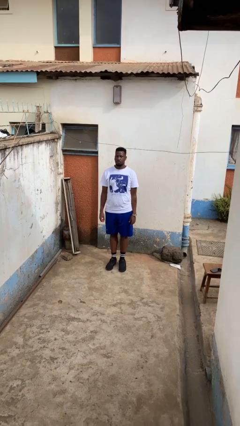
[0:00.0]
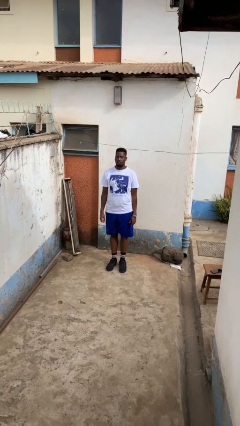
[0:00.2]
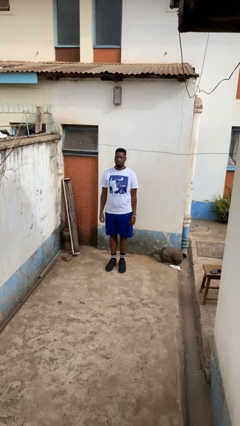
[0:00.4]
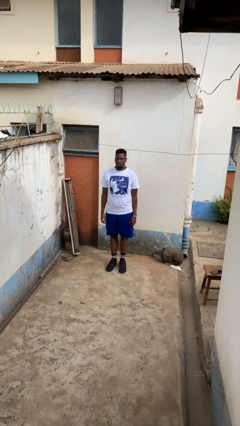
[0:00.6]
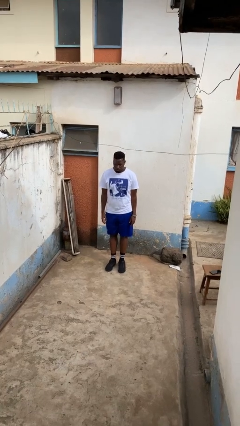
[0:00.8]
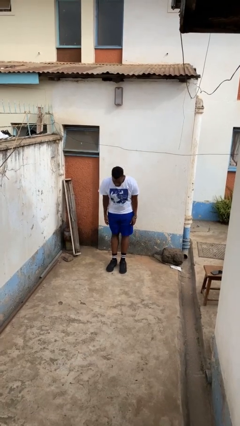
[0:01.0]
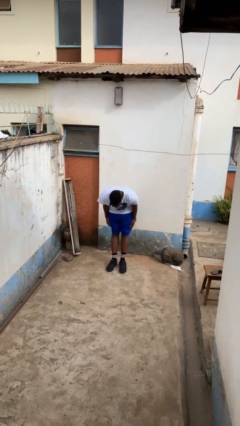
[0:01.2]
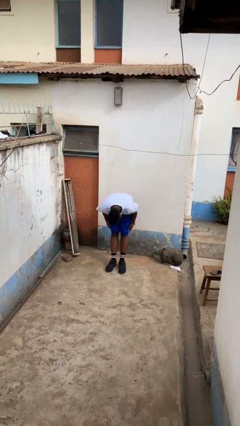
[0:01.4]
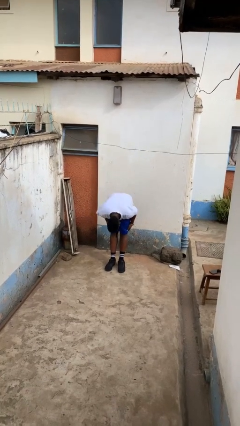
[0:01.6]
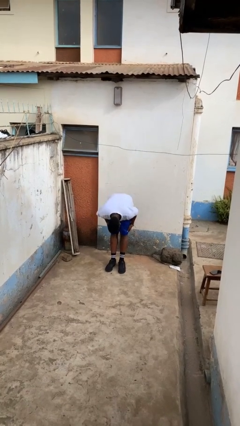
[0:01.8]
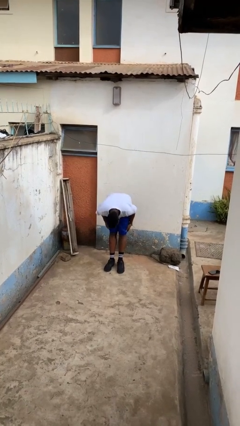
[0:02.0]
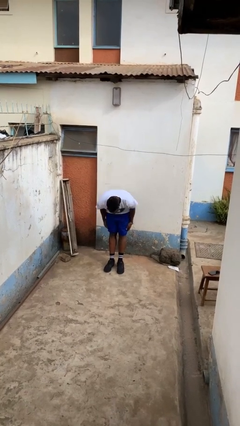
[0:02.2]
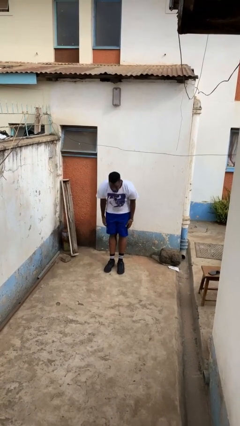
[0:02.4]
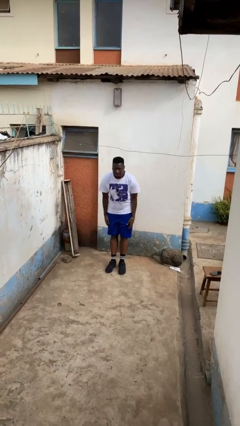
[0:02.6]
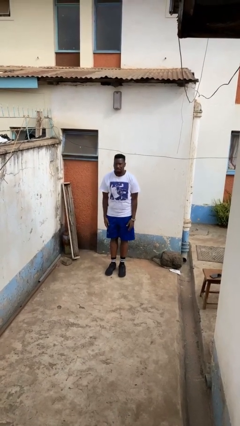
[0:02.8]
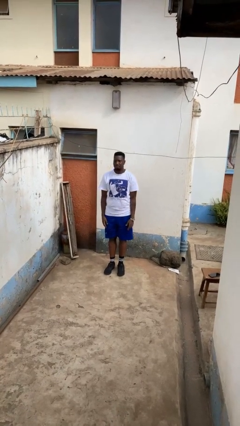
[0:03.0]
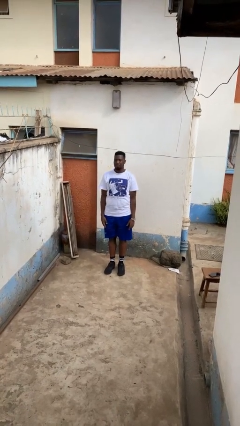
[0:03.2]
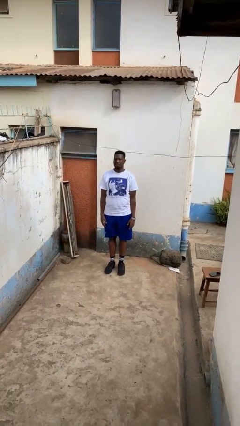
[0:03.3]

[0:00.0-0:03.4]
person bows

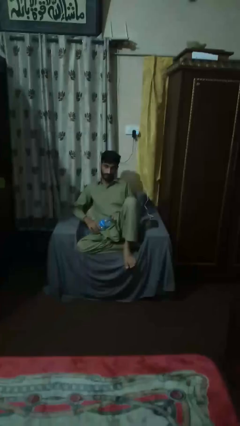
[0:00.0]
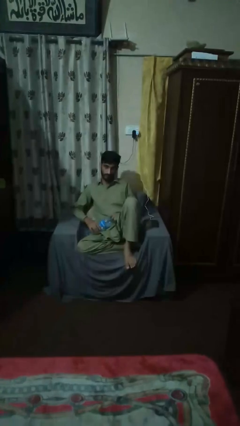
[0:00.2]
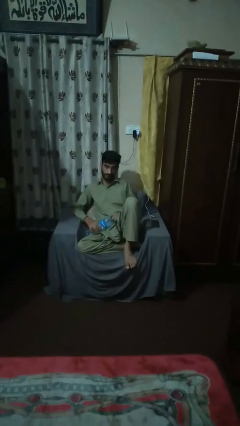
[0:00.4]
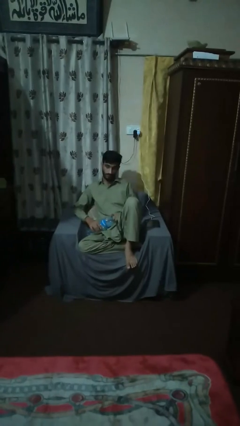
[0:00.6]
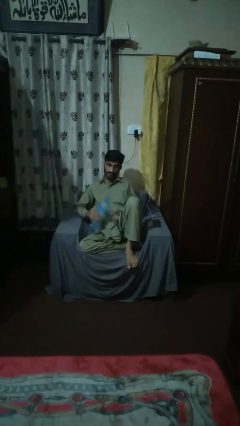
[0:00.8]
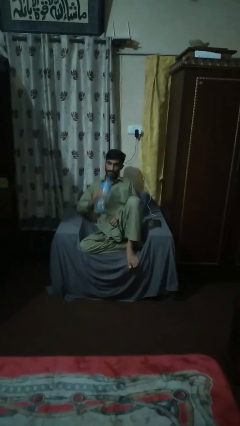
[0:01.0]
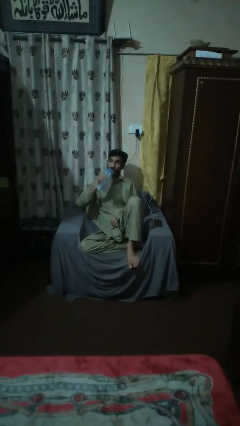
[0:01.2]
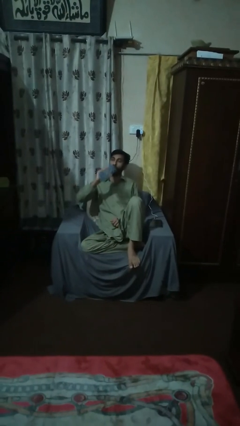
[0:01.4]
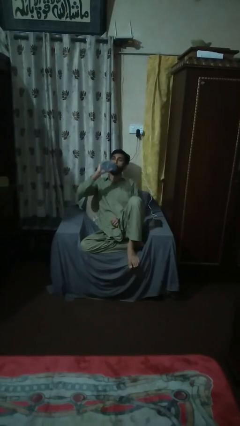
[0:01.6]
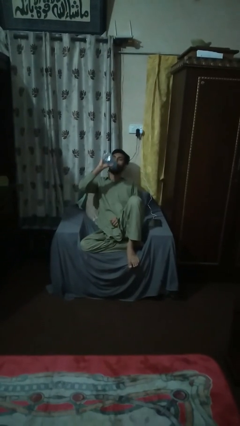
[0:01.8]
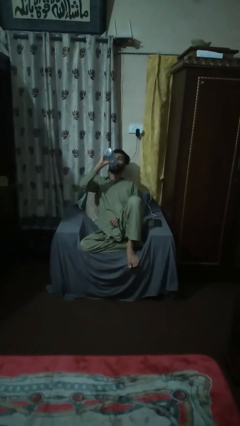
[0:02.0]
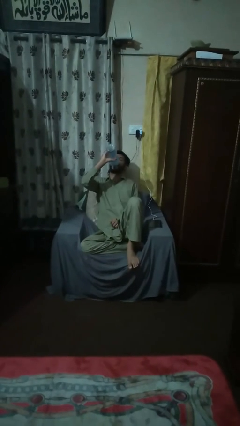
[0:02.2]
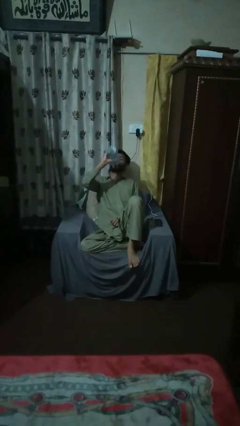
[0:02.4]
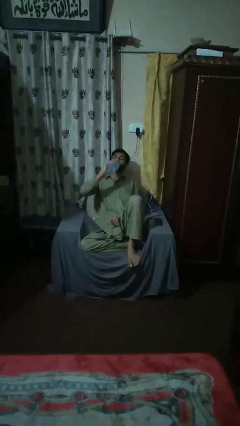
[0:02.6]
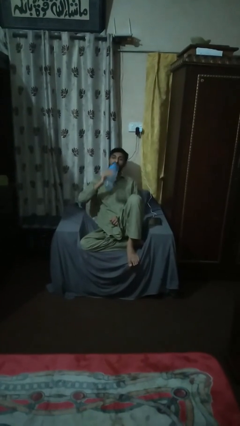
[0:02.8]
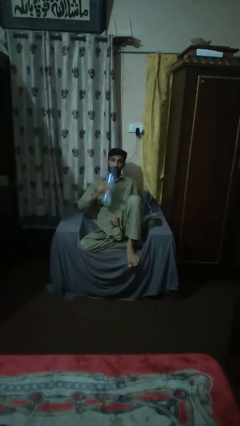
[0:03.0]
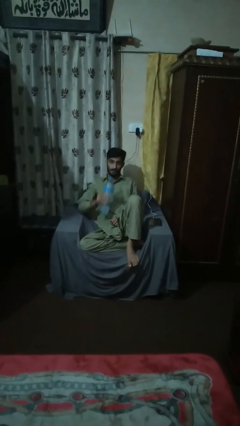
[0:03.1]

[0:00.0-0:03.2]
person drinks from bottle

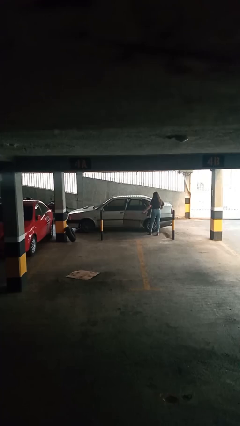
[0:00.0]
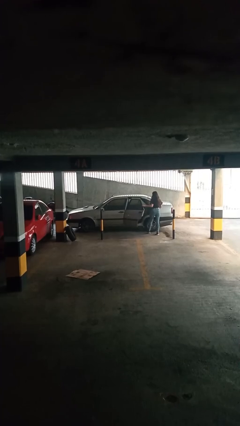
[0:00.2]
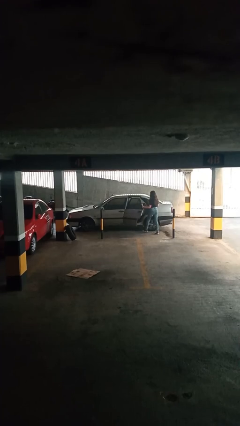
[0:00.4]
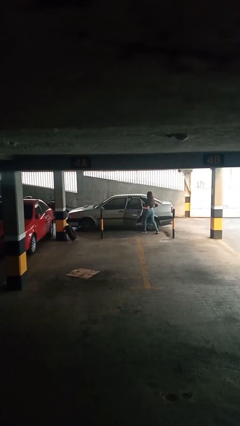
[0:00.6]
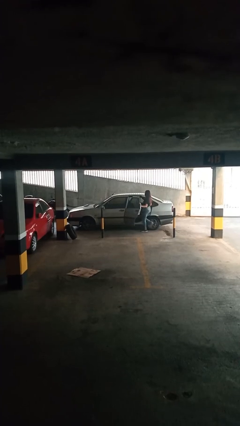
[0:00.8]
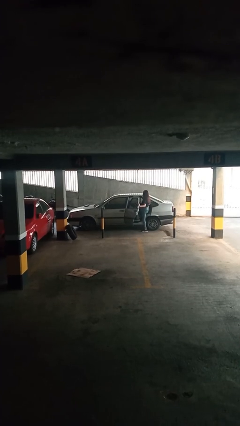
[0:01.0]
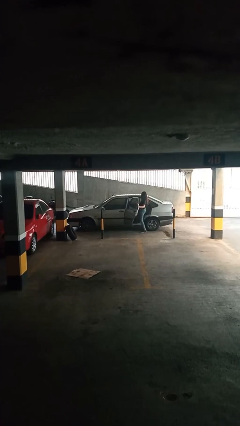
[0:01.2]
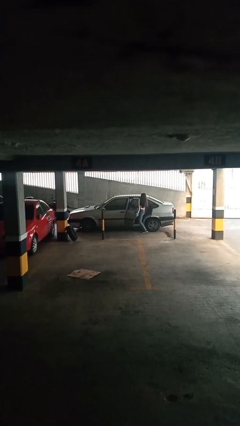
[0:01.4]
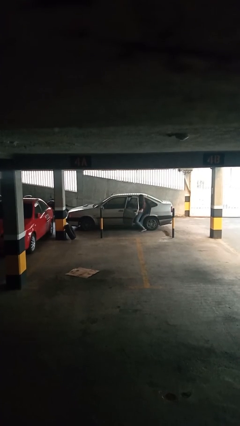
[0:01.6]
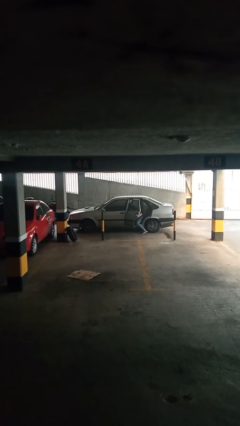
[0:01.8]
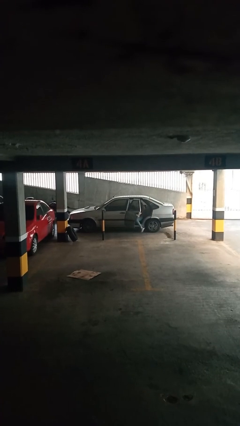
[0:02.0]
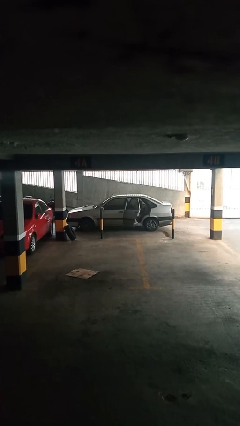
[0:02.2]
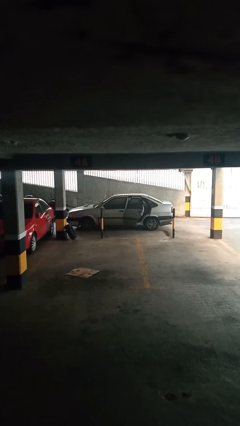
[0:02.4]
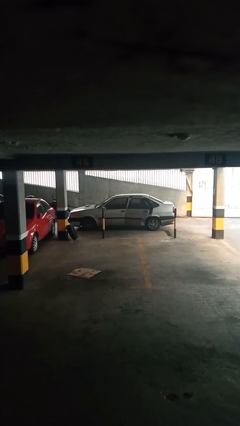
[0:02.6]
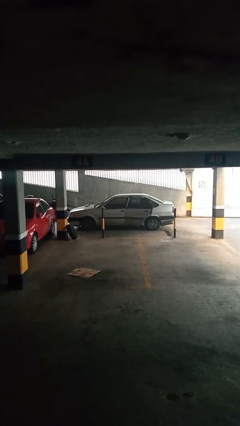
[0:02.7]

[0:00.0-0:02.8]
car picks up person

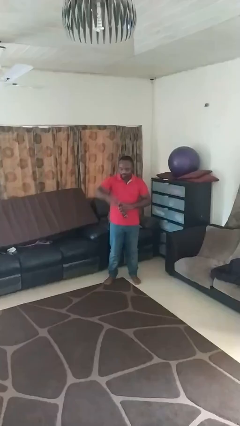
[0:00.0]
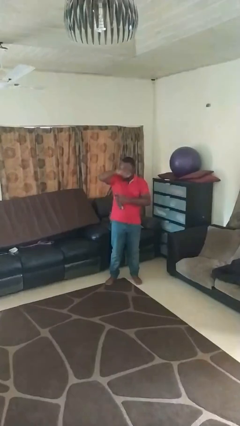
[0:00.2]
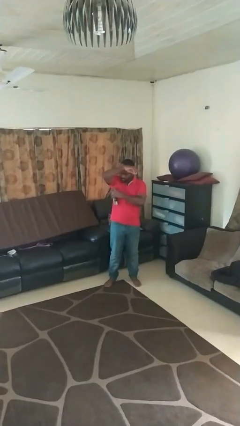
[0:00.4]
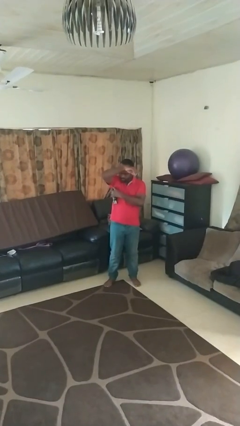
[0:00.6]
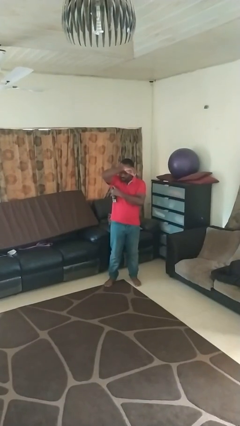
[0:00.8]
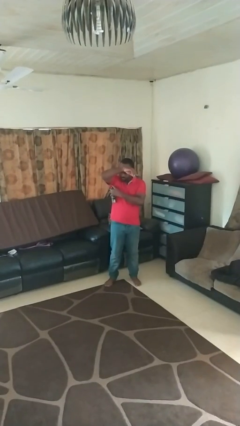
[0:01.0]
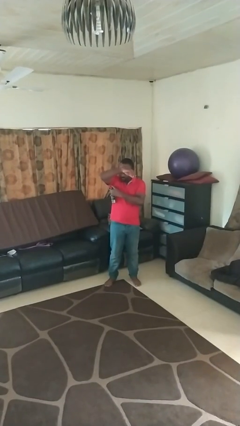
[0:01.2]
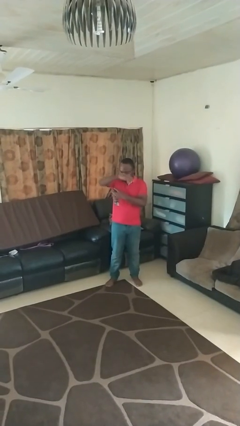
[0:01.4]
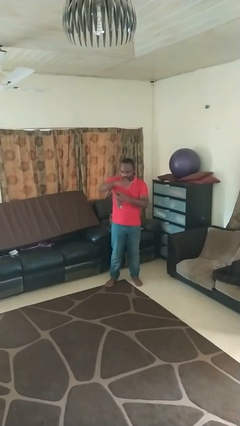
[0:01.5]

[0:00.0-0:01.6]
person applies deodorant

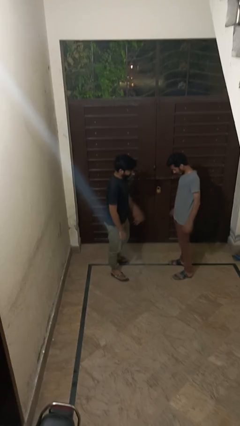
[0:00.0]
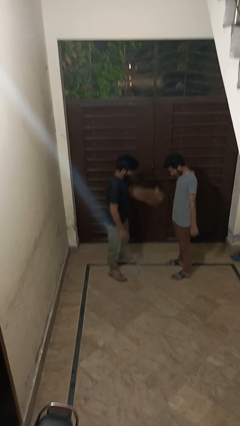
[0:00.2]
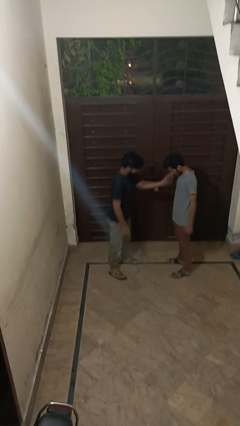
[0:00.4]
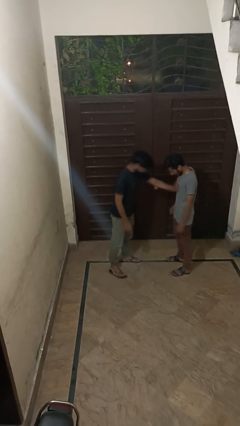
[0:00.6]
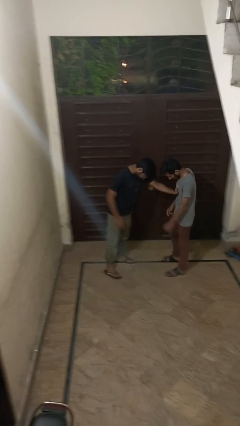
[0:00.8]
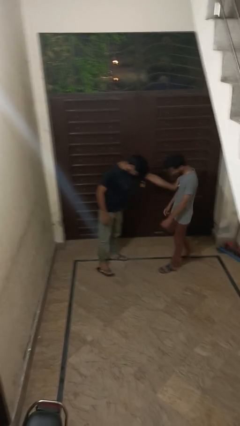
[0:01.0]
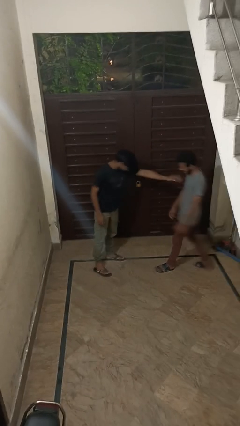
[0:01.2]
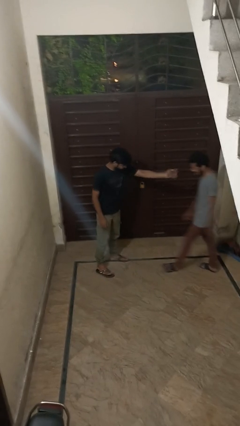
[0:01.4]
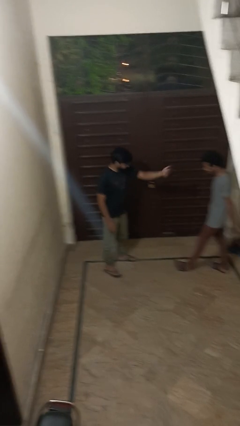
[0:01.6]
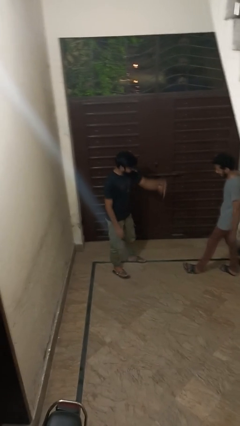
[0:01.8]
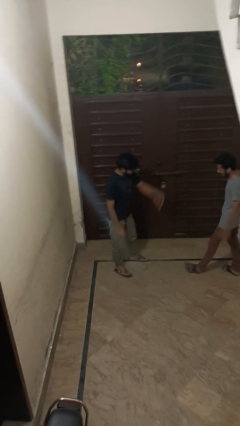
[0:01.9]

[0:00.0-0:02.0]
person shoves person

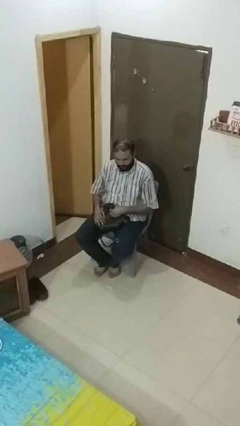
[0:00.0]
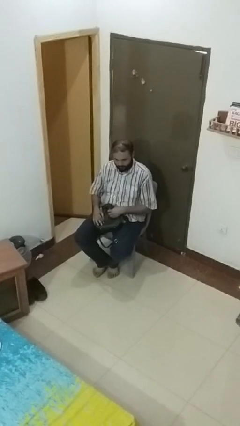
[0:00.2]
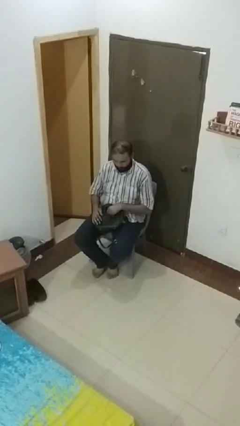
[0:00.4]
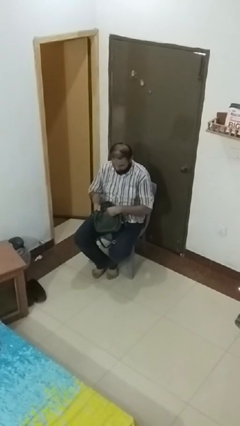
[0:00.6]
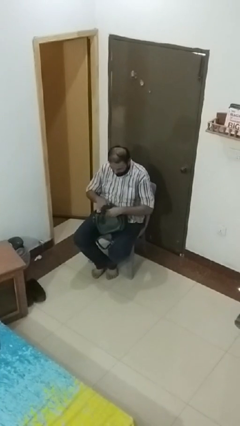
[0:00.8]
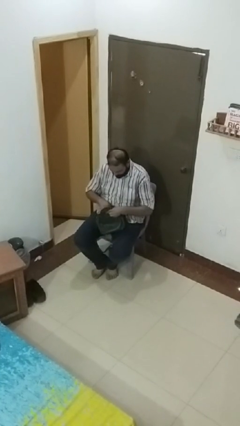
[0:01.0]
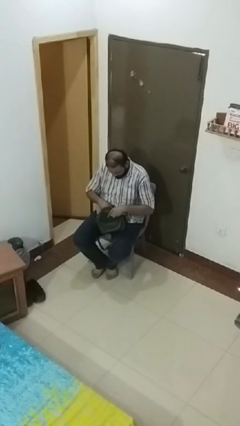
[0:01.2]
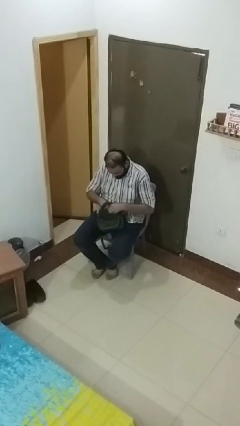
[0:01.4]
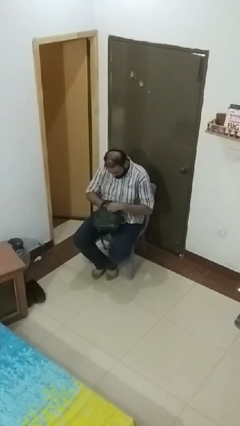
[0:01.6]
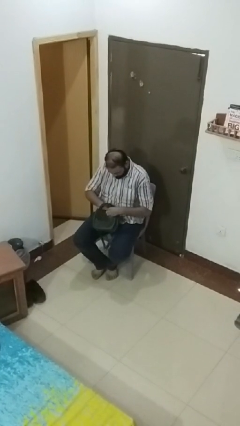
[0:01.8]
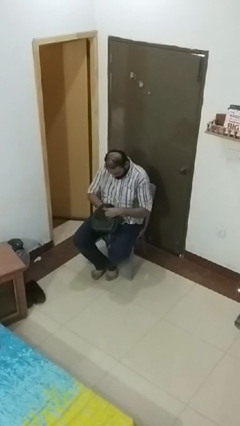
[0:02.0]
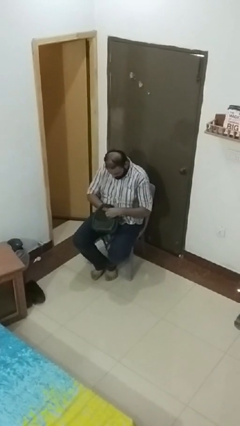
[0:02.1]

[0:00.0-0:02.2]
person searches in purse

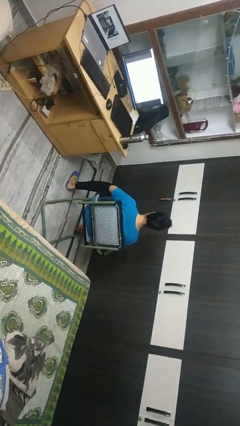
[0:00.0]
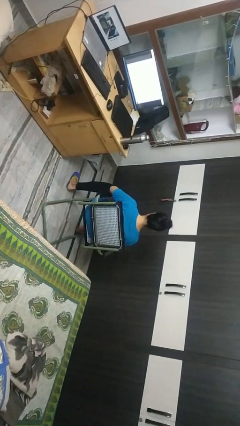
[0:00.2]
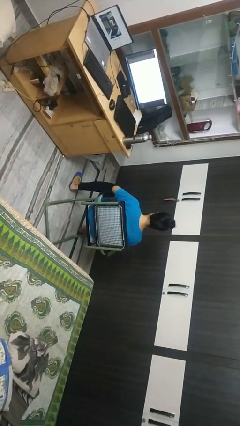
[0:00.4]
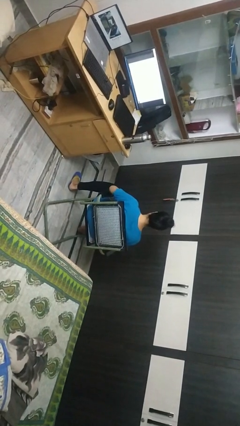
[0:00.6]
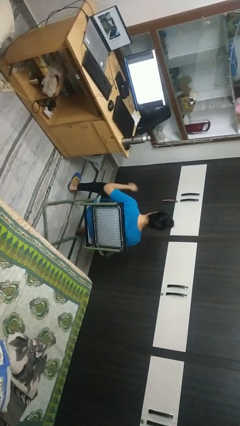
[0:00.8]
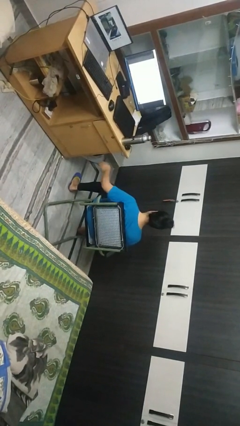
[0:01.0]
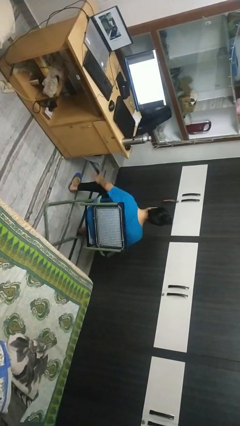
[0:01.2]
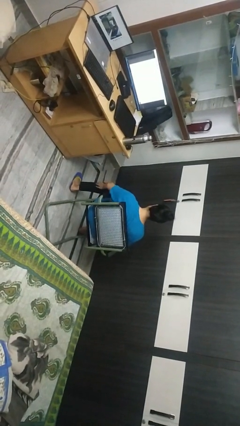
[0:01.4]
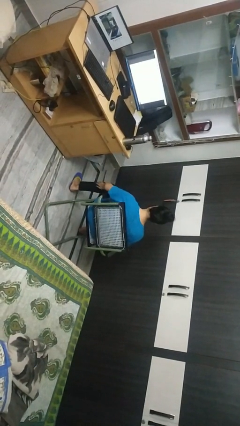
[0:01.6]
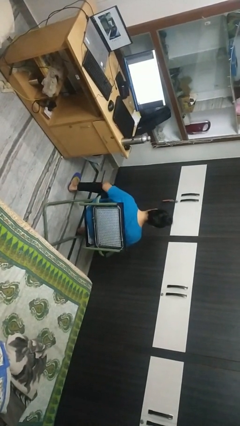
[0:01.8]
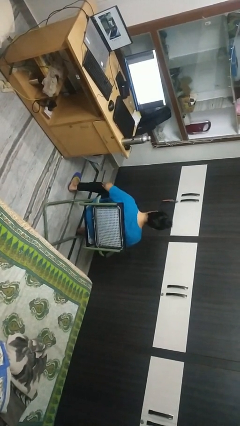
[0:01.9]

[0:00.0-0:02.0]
person swats bug

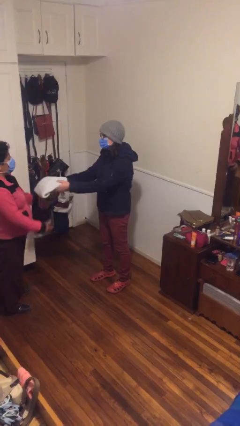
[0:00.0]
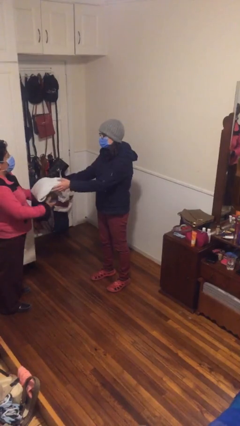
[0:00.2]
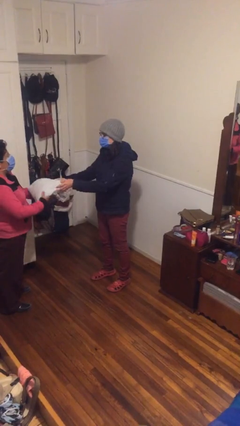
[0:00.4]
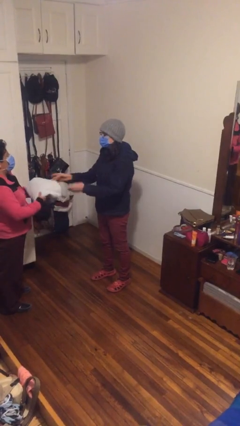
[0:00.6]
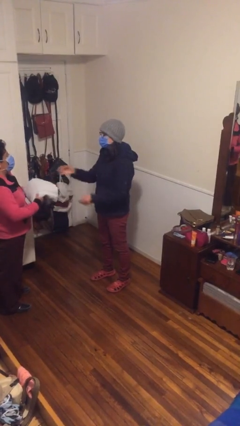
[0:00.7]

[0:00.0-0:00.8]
person transfers object to person
